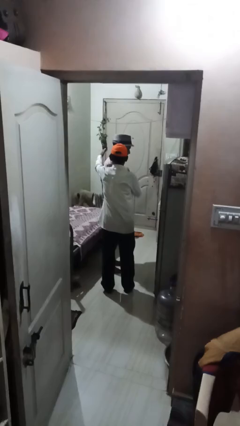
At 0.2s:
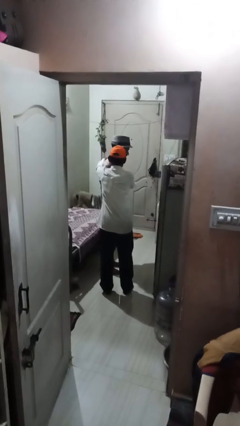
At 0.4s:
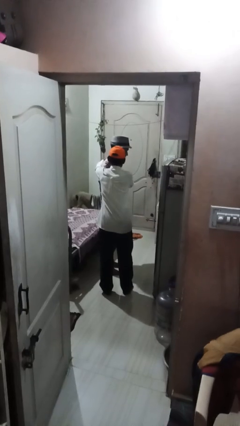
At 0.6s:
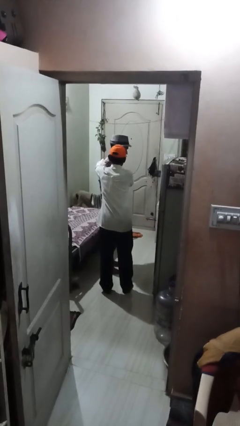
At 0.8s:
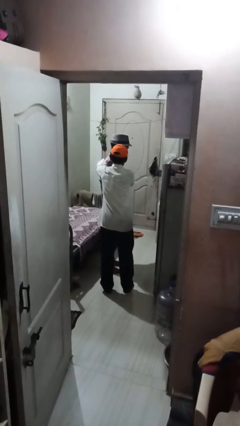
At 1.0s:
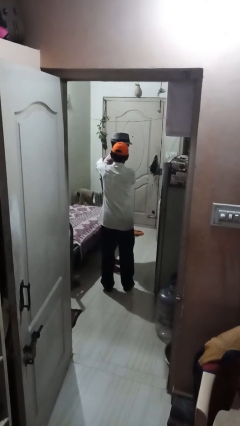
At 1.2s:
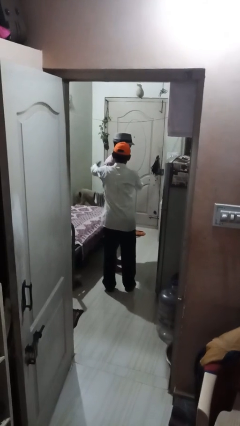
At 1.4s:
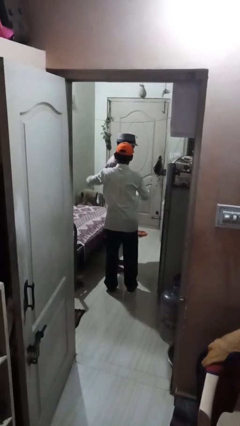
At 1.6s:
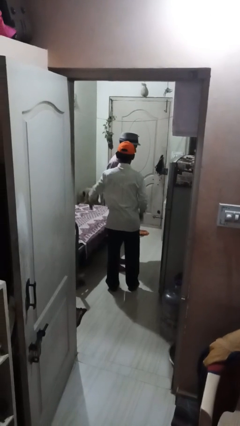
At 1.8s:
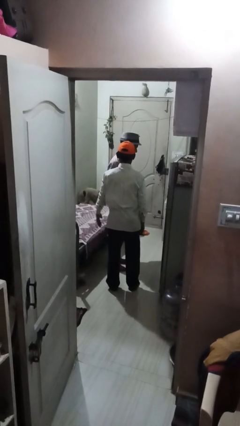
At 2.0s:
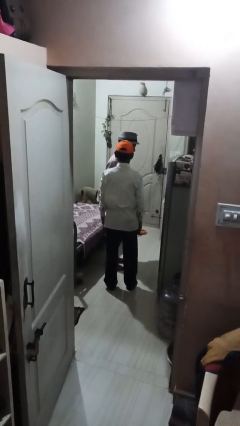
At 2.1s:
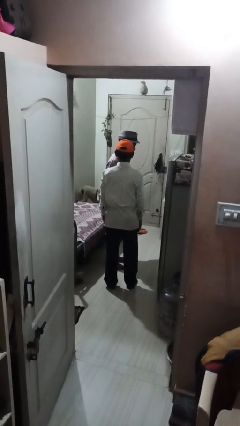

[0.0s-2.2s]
person pounds shoulders of person

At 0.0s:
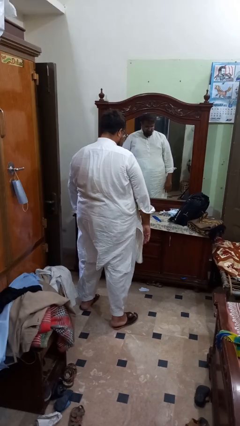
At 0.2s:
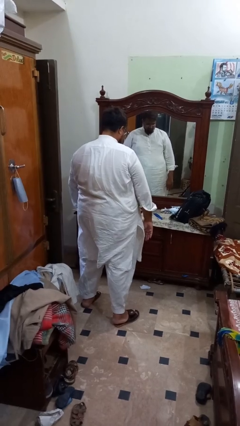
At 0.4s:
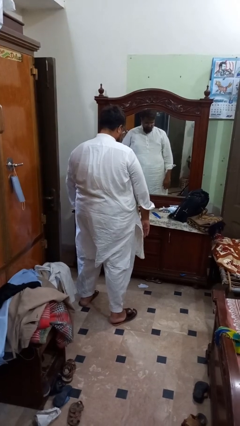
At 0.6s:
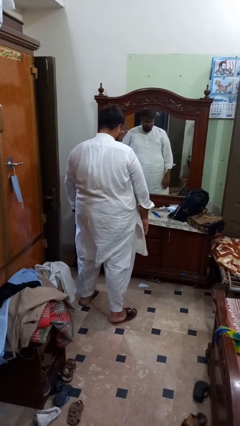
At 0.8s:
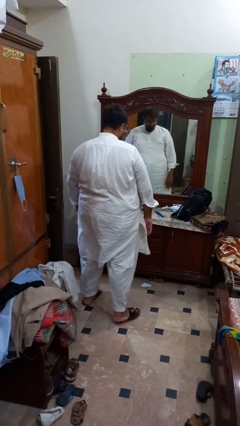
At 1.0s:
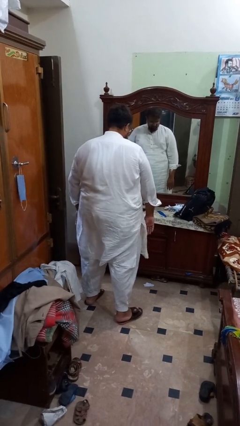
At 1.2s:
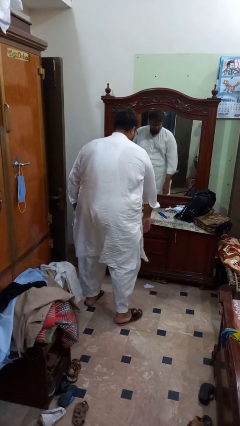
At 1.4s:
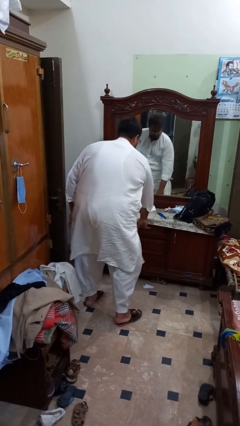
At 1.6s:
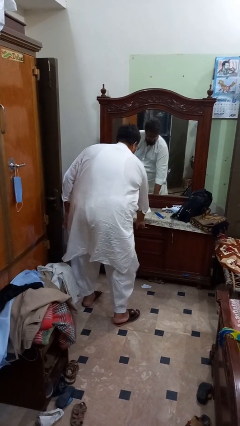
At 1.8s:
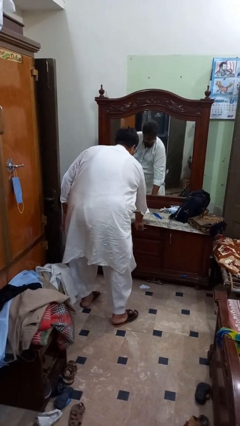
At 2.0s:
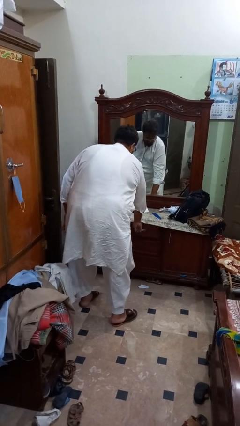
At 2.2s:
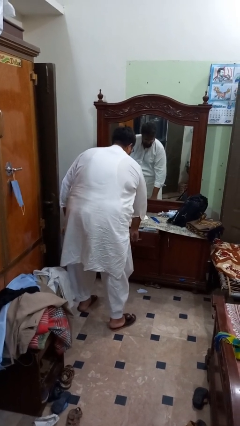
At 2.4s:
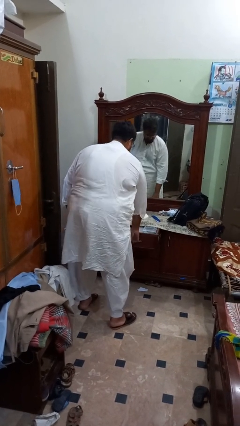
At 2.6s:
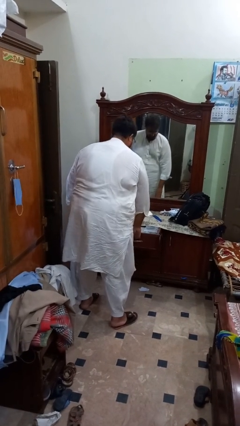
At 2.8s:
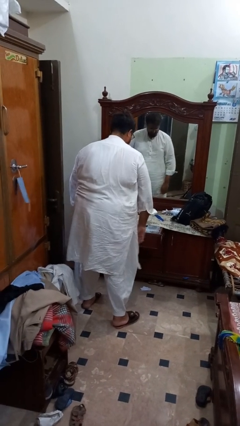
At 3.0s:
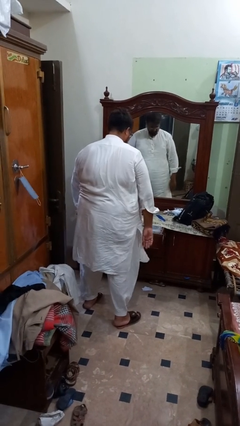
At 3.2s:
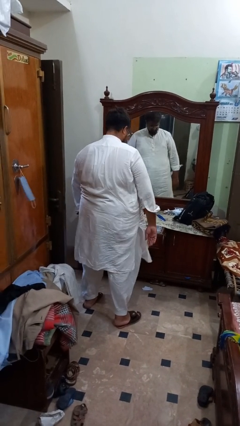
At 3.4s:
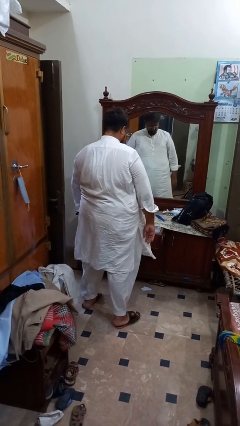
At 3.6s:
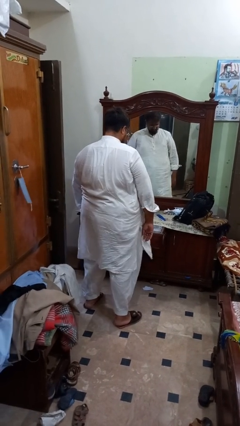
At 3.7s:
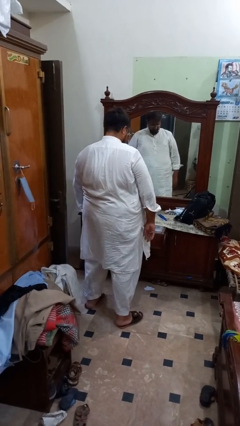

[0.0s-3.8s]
person opens dresser drawer

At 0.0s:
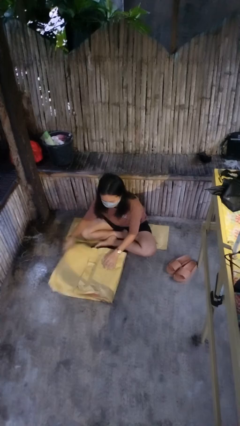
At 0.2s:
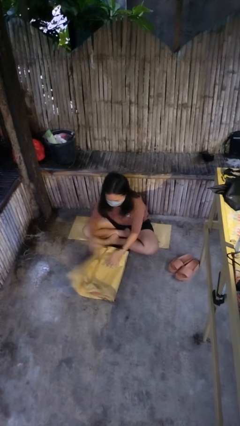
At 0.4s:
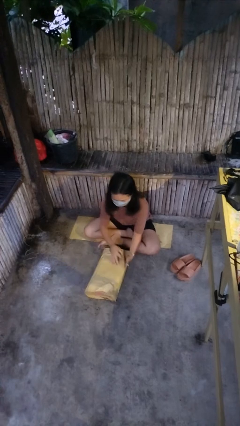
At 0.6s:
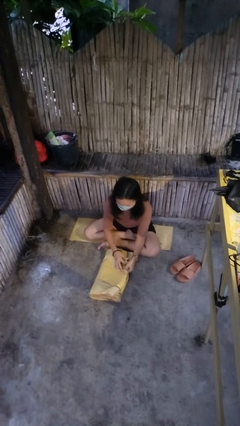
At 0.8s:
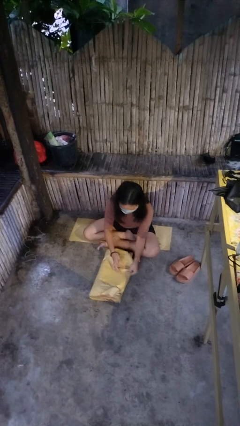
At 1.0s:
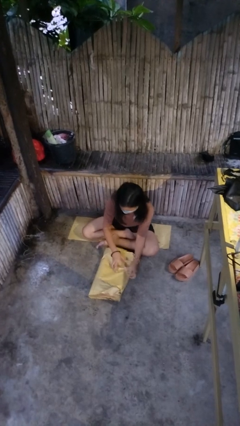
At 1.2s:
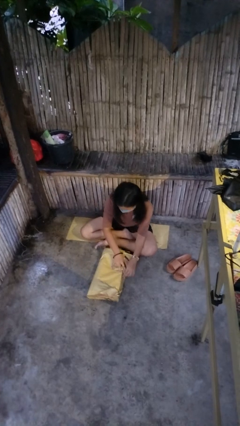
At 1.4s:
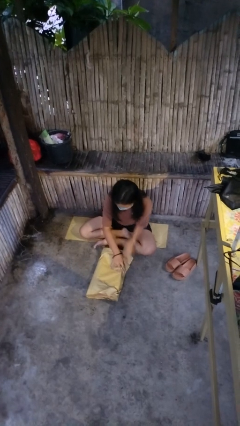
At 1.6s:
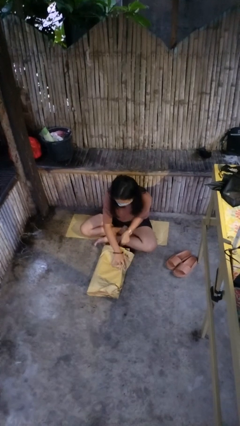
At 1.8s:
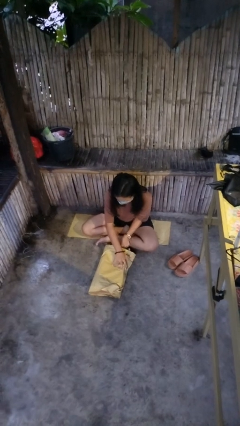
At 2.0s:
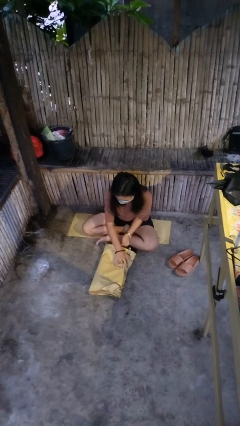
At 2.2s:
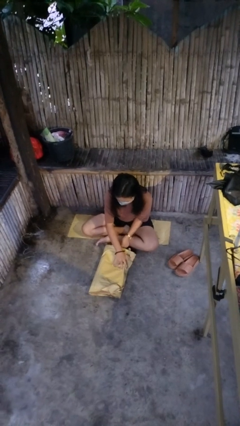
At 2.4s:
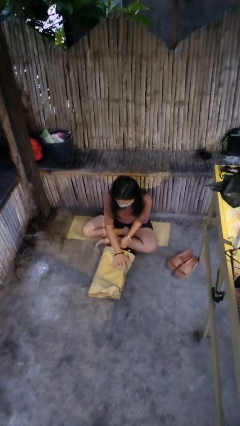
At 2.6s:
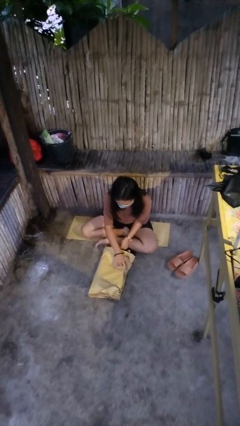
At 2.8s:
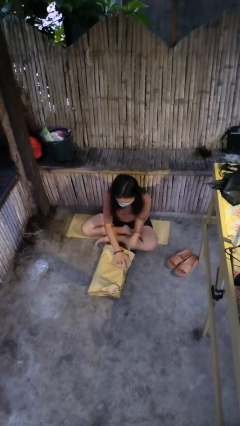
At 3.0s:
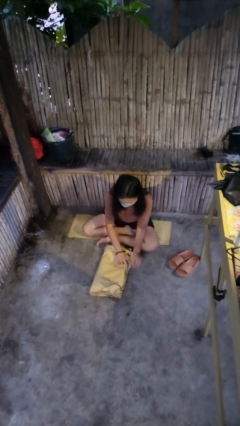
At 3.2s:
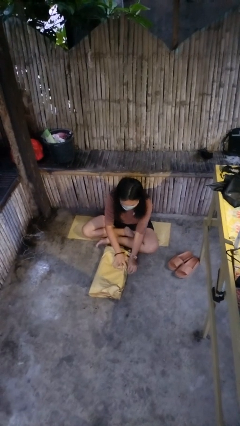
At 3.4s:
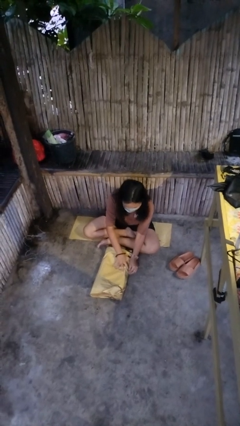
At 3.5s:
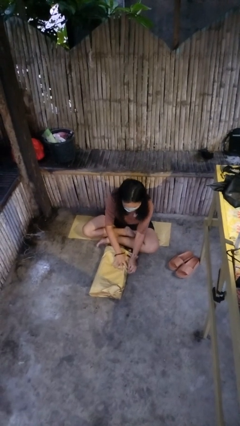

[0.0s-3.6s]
person wraps box

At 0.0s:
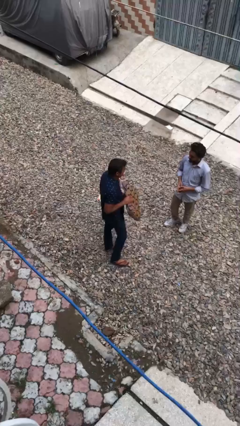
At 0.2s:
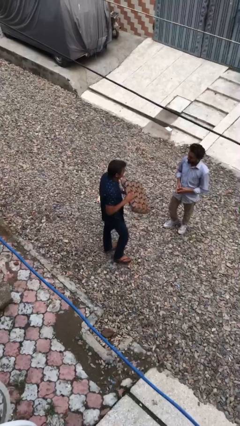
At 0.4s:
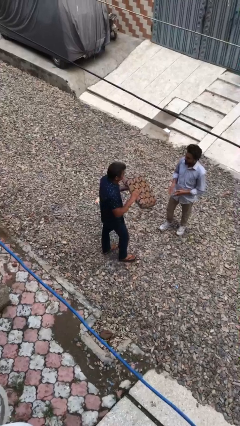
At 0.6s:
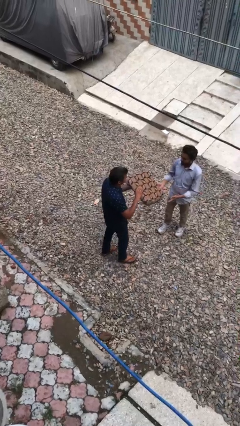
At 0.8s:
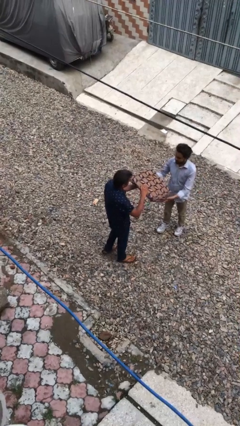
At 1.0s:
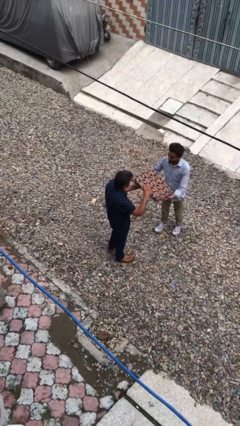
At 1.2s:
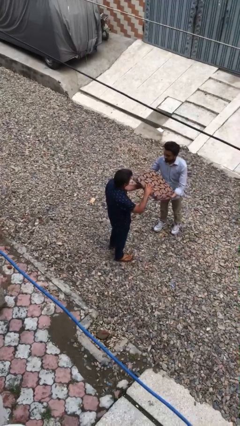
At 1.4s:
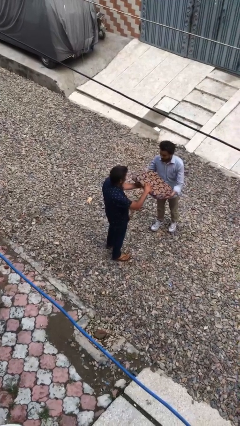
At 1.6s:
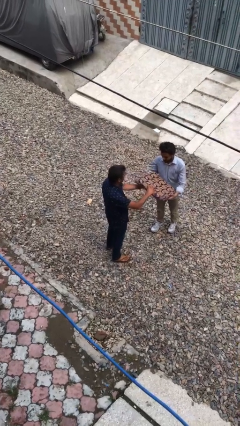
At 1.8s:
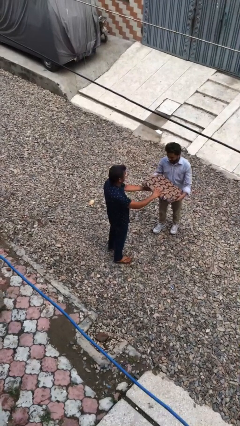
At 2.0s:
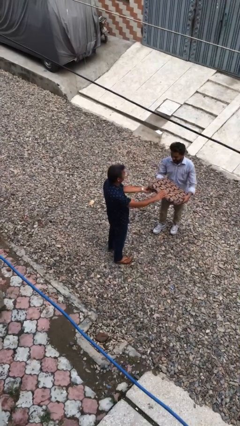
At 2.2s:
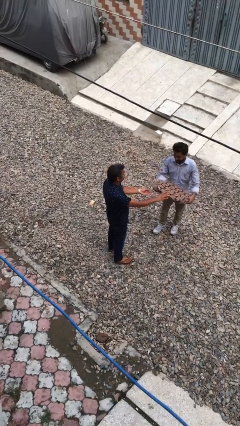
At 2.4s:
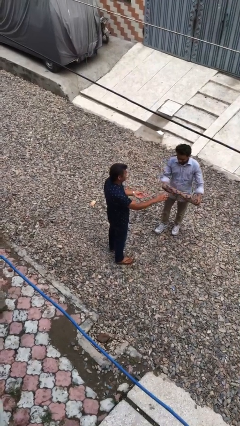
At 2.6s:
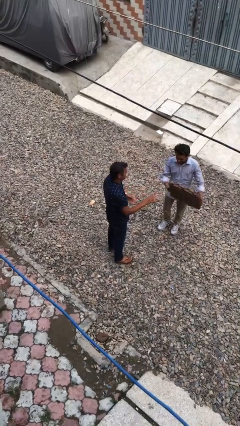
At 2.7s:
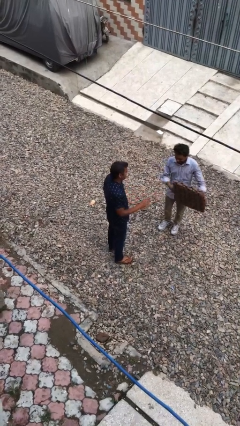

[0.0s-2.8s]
person transfers object to person

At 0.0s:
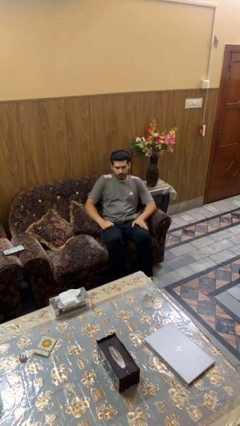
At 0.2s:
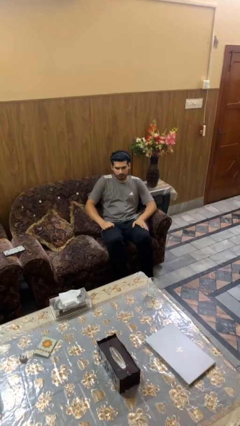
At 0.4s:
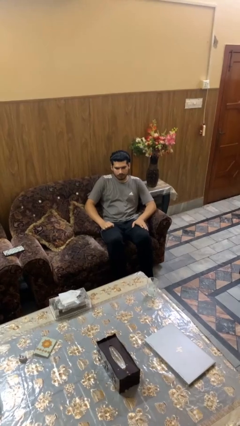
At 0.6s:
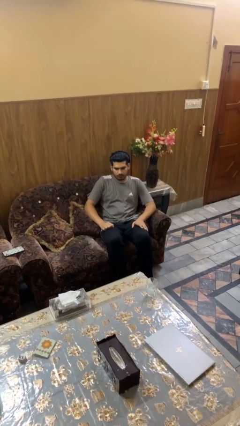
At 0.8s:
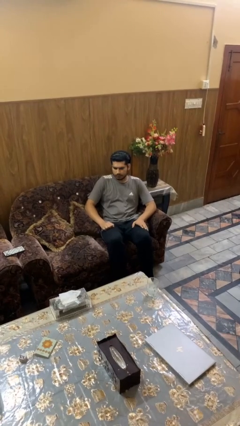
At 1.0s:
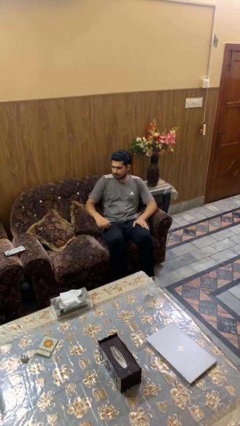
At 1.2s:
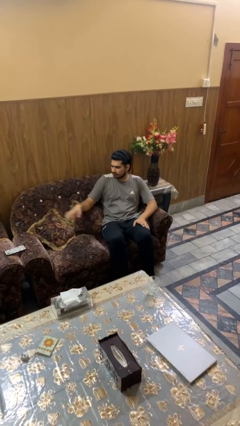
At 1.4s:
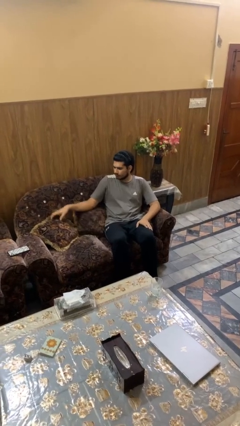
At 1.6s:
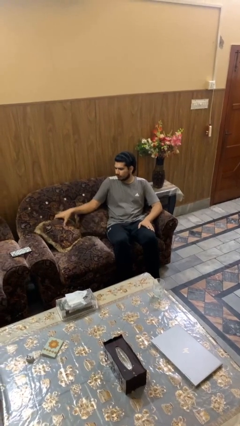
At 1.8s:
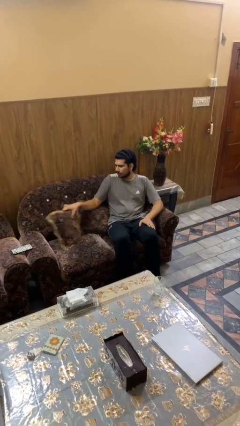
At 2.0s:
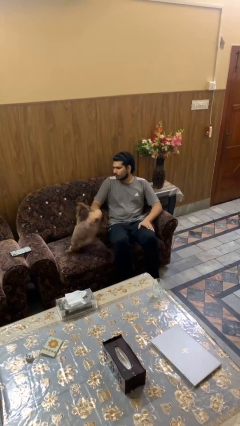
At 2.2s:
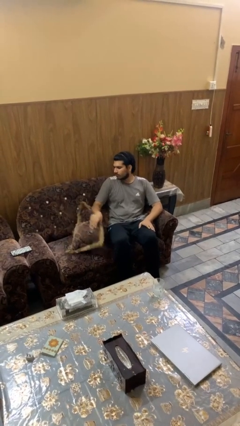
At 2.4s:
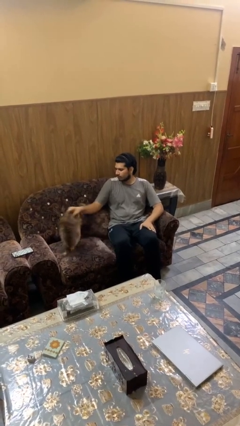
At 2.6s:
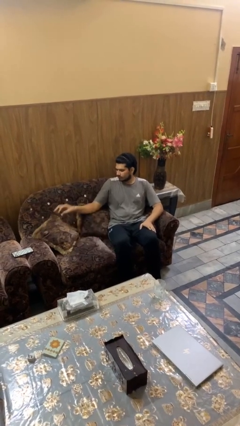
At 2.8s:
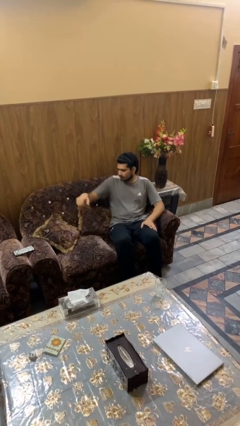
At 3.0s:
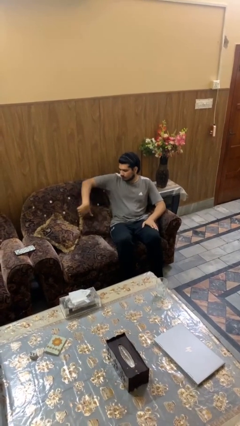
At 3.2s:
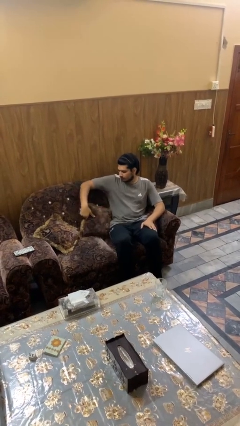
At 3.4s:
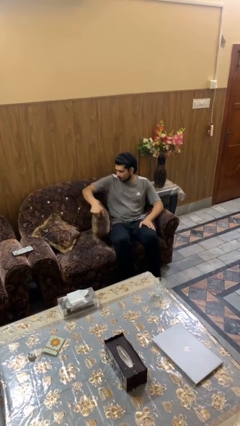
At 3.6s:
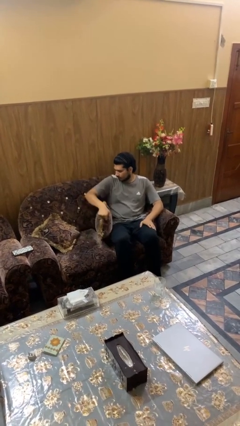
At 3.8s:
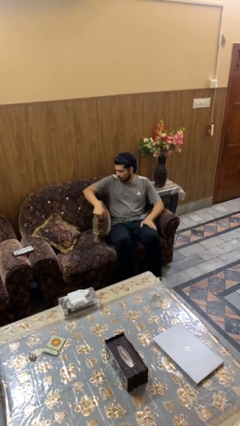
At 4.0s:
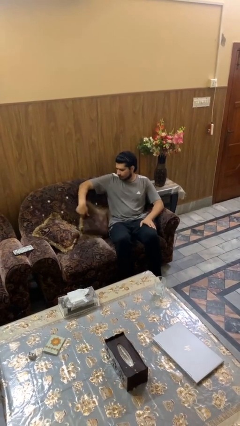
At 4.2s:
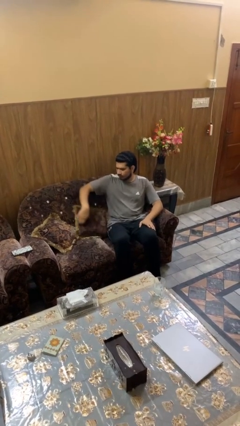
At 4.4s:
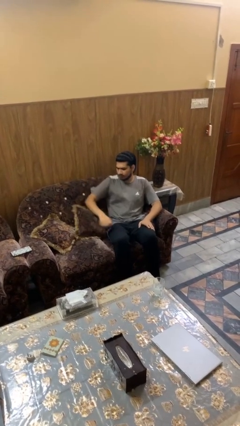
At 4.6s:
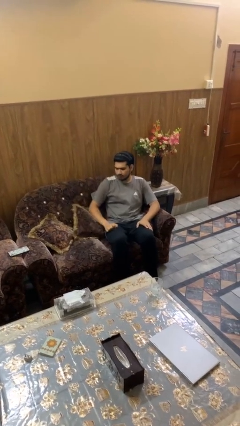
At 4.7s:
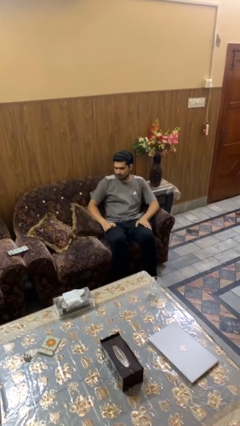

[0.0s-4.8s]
person searches in couch

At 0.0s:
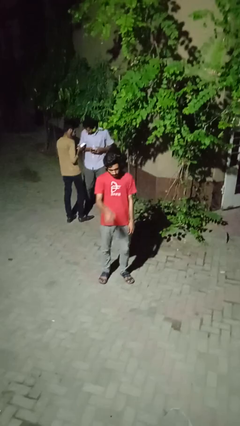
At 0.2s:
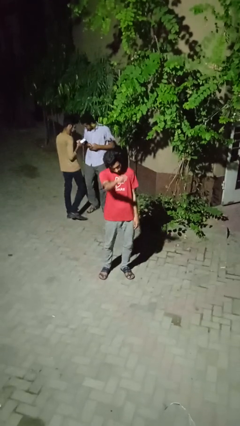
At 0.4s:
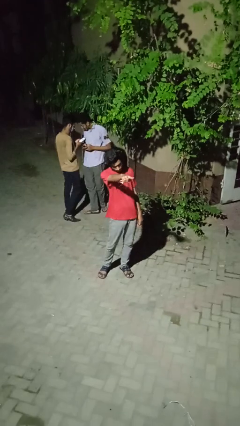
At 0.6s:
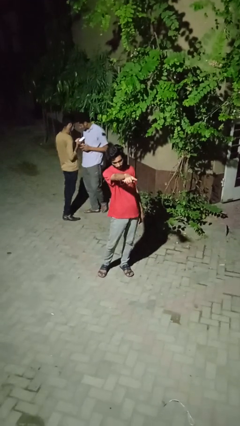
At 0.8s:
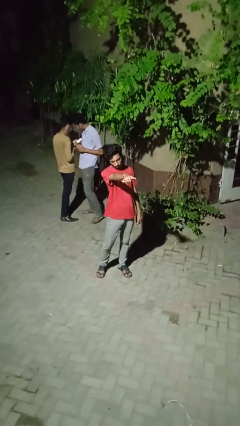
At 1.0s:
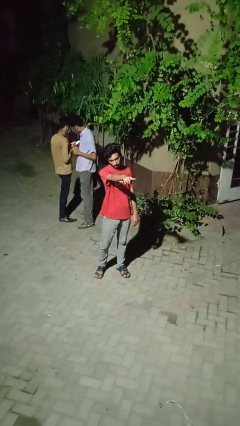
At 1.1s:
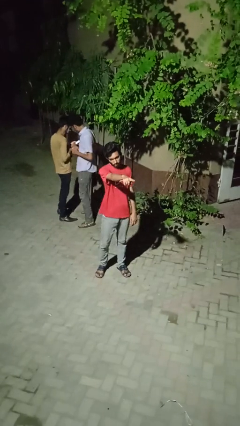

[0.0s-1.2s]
person points at person
